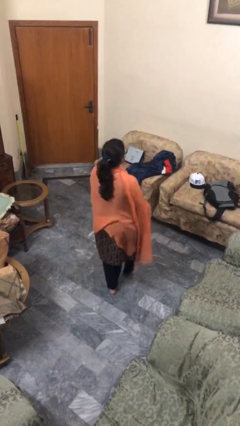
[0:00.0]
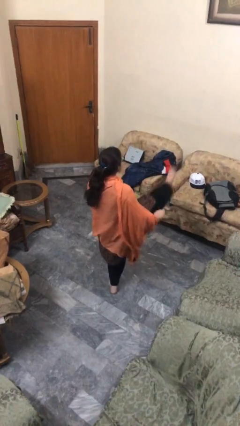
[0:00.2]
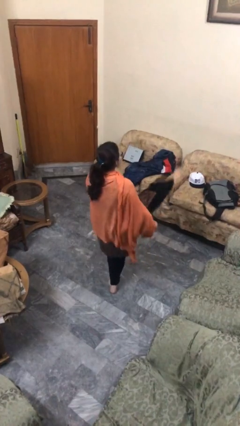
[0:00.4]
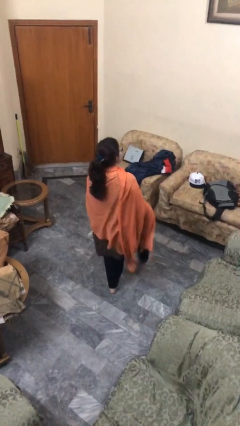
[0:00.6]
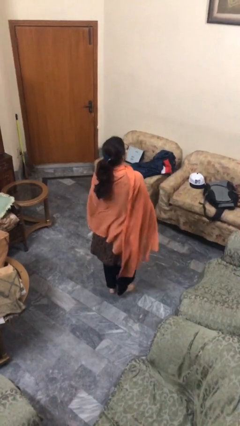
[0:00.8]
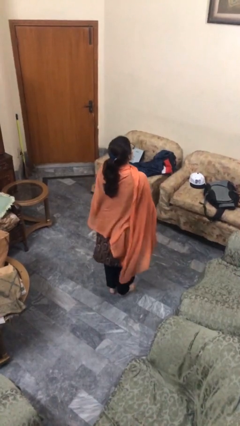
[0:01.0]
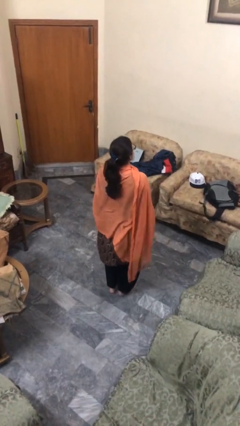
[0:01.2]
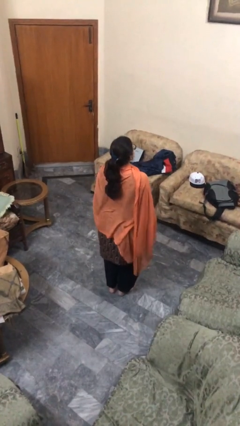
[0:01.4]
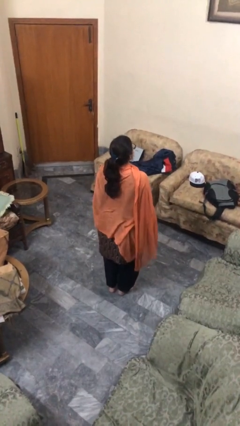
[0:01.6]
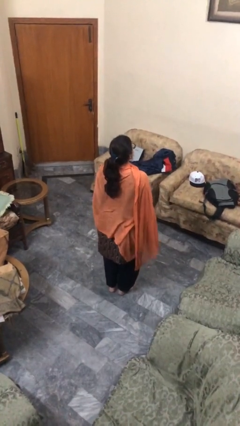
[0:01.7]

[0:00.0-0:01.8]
person karate kicks

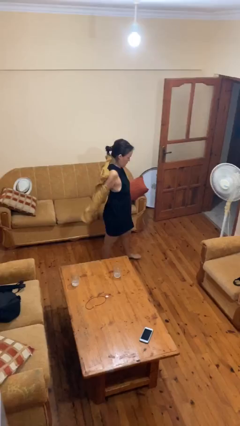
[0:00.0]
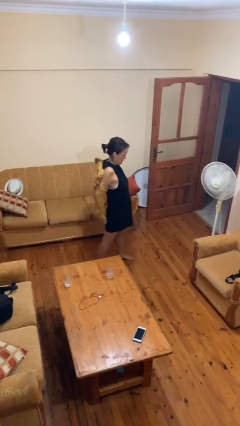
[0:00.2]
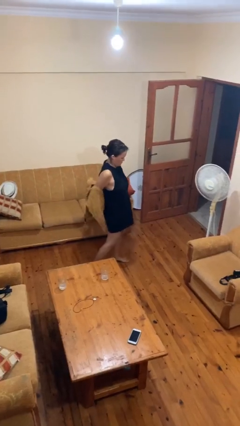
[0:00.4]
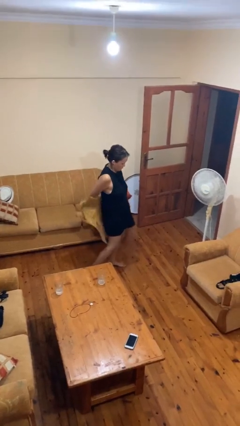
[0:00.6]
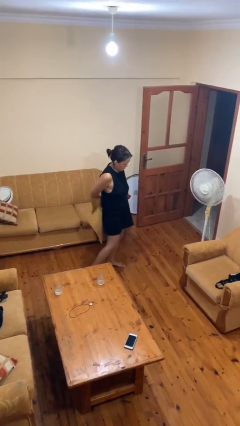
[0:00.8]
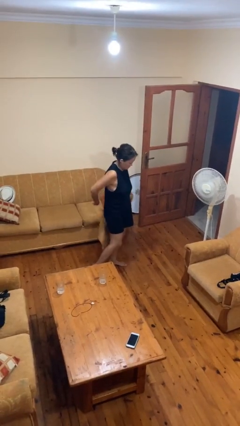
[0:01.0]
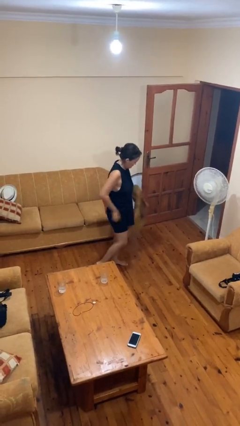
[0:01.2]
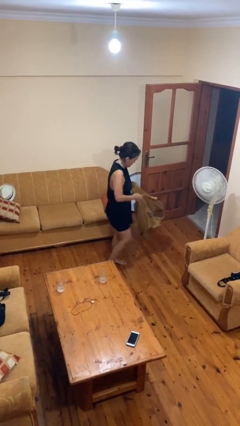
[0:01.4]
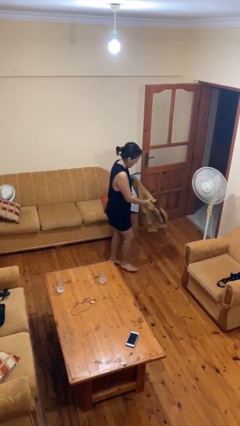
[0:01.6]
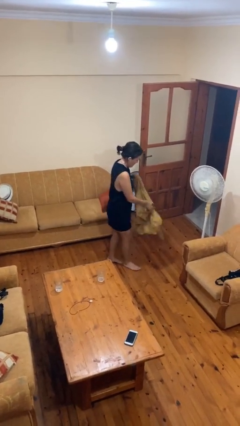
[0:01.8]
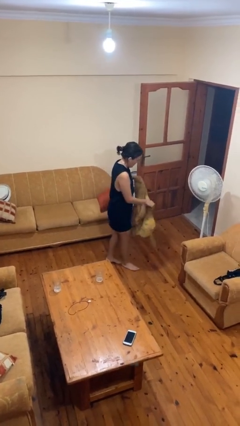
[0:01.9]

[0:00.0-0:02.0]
person takes off jacket

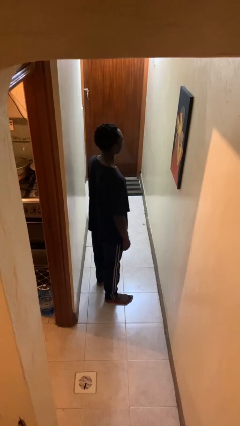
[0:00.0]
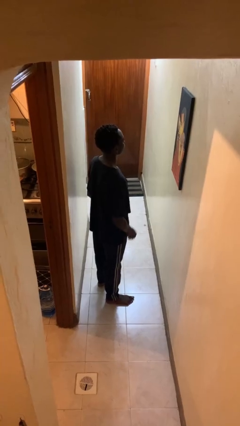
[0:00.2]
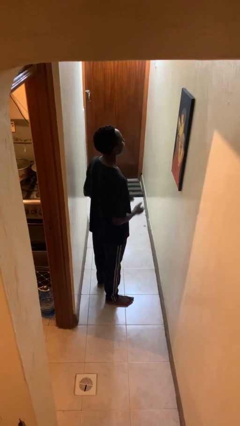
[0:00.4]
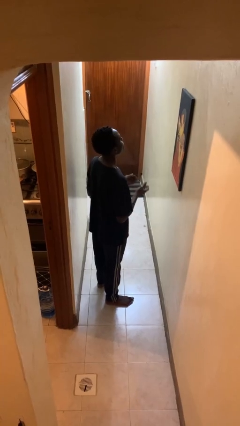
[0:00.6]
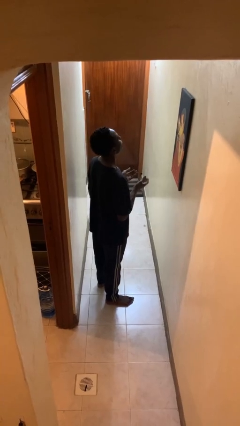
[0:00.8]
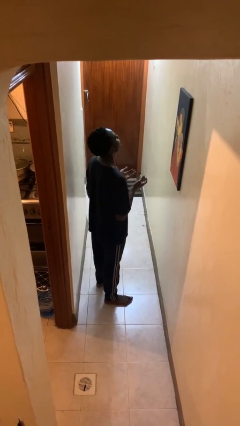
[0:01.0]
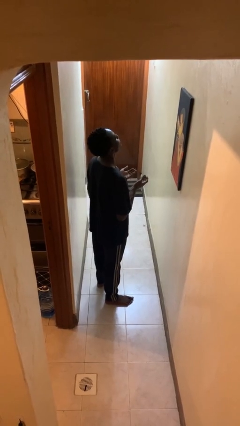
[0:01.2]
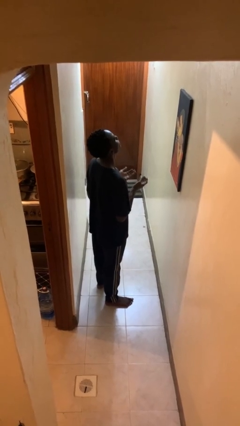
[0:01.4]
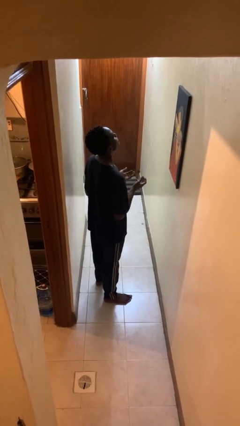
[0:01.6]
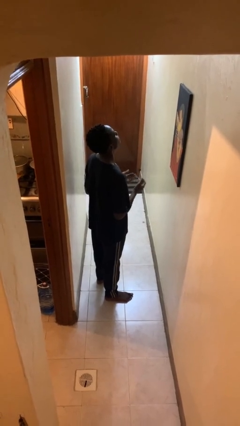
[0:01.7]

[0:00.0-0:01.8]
person prays

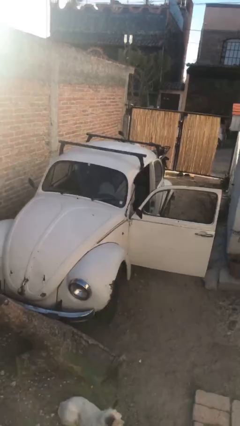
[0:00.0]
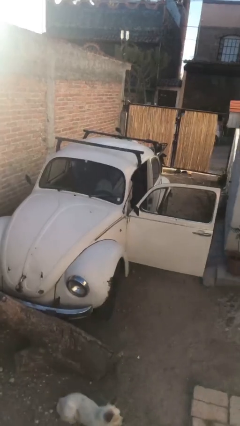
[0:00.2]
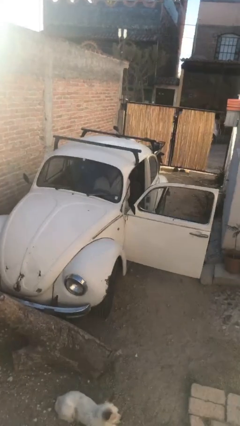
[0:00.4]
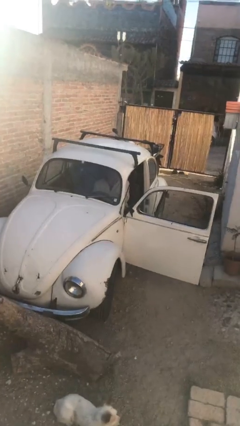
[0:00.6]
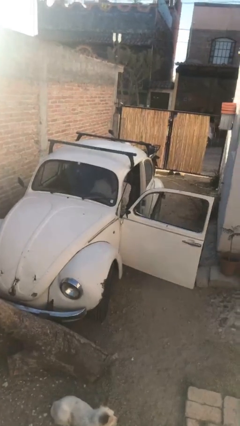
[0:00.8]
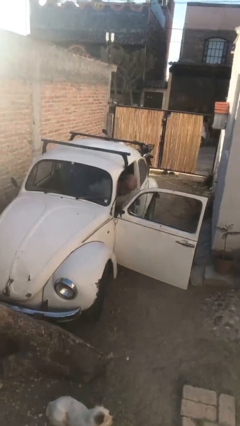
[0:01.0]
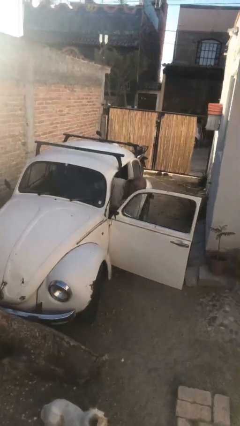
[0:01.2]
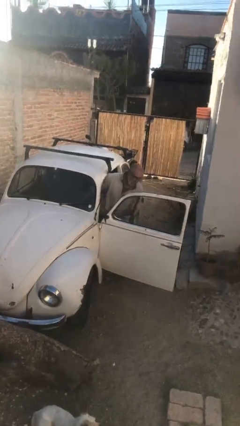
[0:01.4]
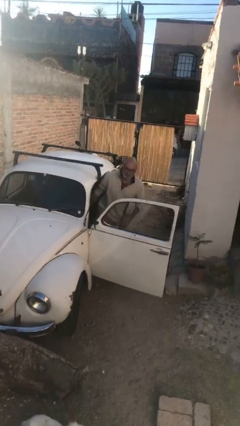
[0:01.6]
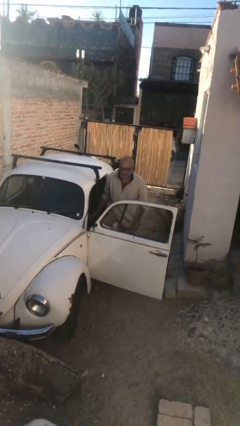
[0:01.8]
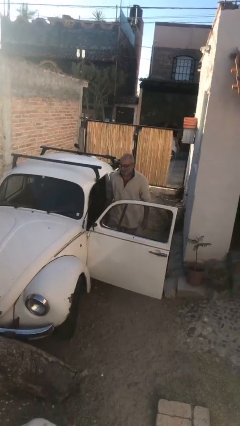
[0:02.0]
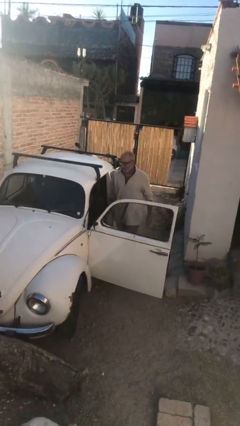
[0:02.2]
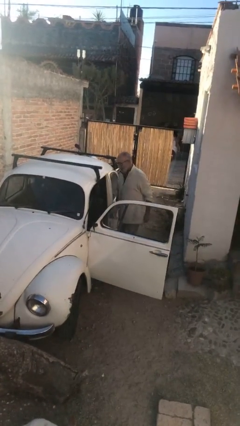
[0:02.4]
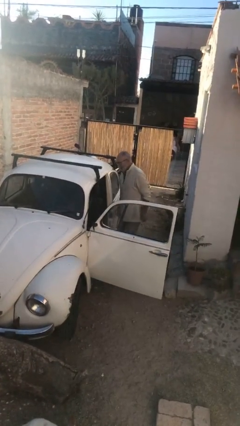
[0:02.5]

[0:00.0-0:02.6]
person exits car

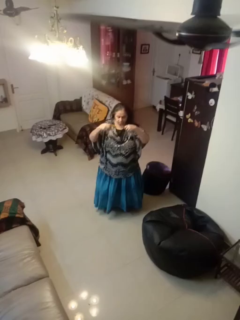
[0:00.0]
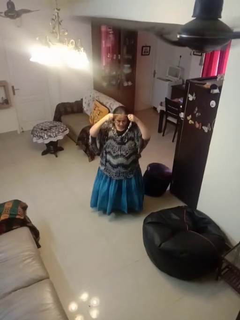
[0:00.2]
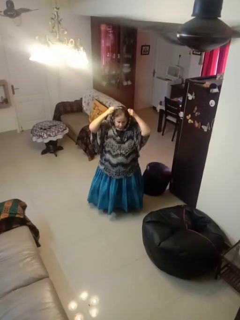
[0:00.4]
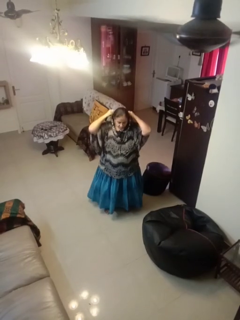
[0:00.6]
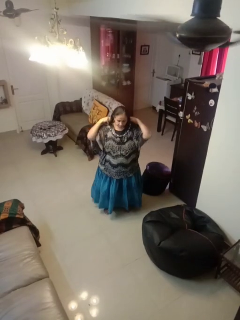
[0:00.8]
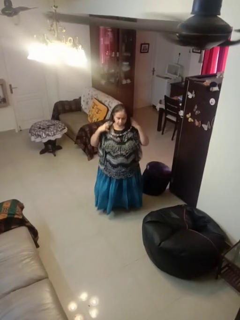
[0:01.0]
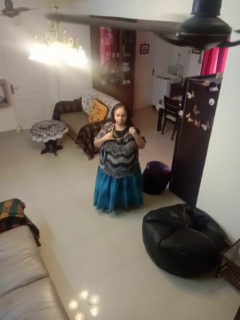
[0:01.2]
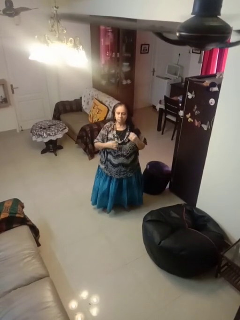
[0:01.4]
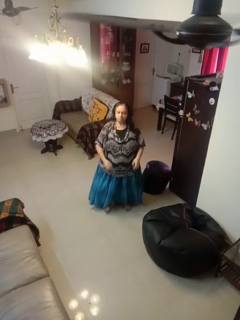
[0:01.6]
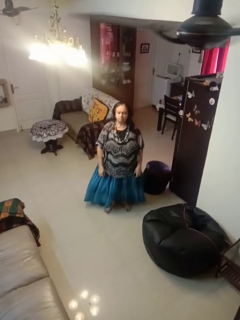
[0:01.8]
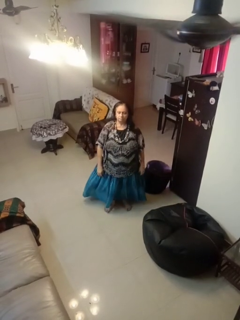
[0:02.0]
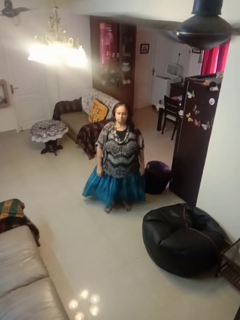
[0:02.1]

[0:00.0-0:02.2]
person puts on necklace

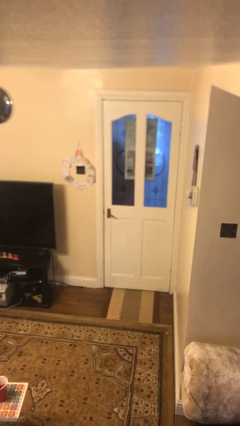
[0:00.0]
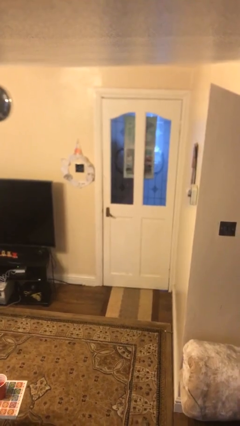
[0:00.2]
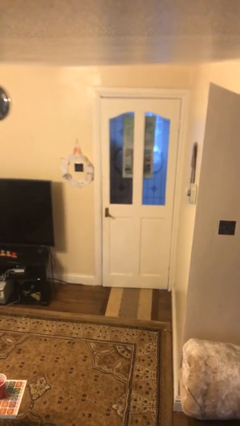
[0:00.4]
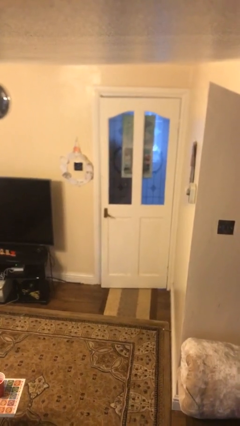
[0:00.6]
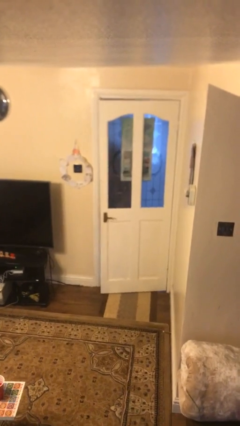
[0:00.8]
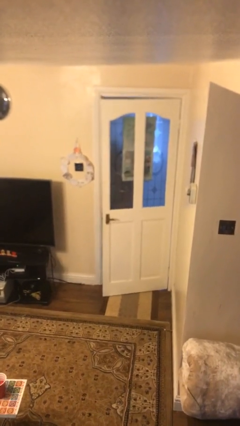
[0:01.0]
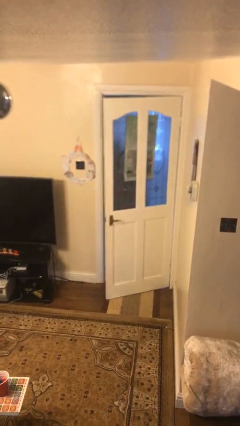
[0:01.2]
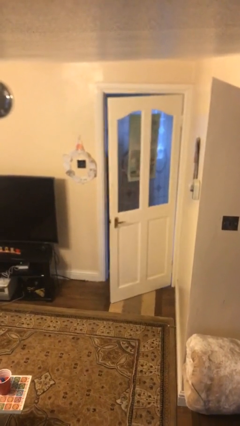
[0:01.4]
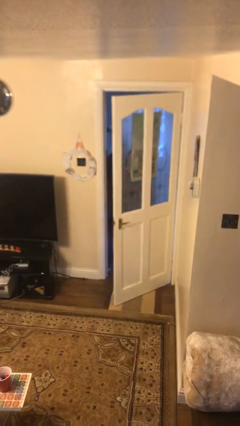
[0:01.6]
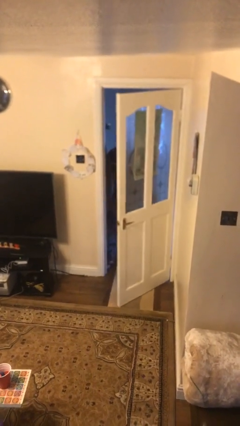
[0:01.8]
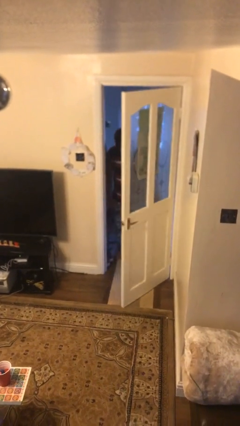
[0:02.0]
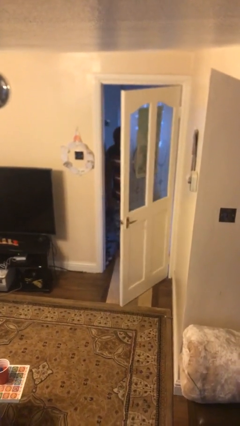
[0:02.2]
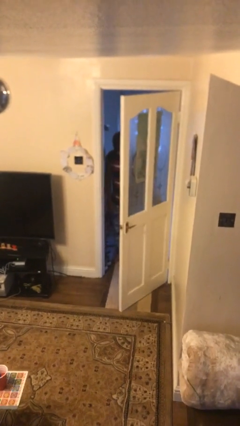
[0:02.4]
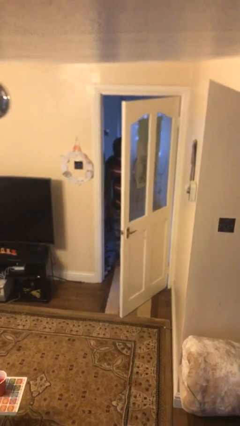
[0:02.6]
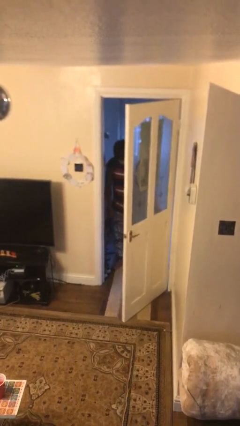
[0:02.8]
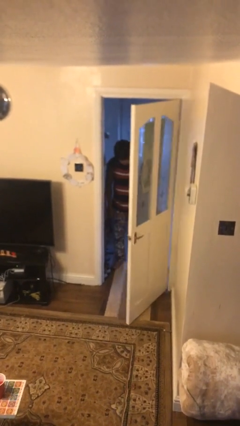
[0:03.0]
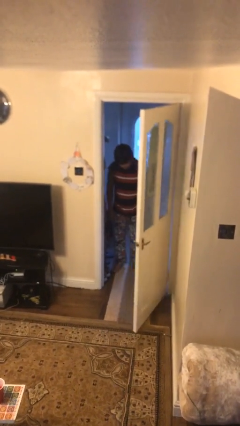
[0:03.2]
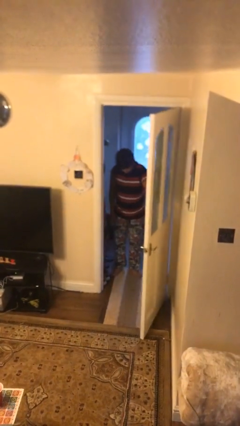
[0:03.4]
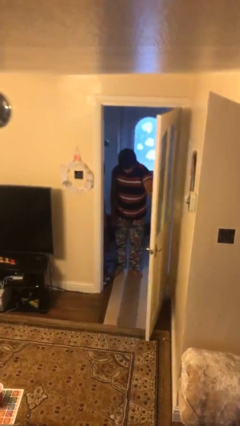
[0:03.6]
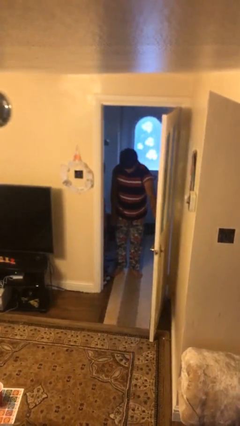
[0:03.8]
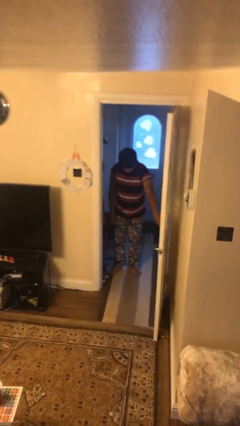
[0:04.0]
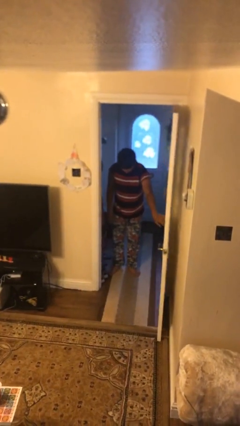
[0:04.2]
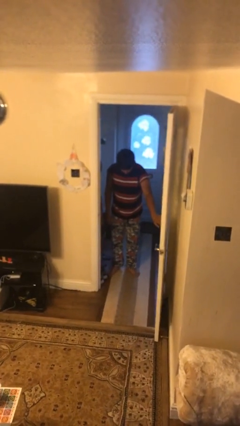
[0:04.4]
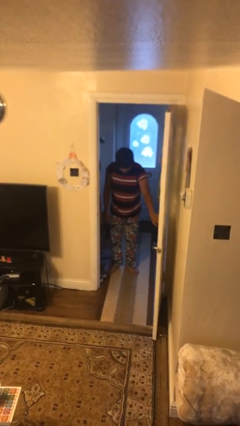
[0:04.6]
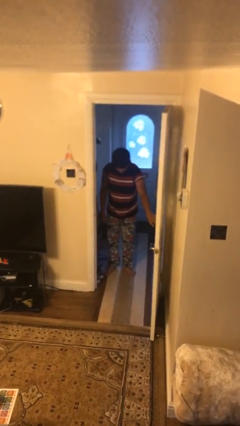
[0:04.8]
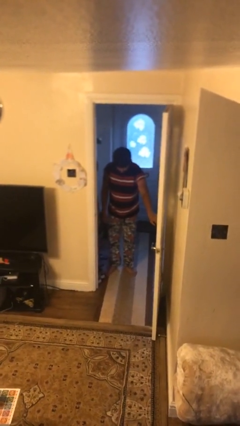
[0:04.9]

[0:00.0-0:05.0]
person opens facility door

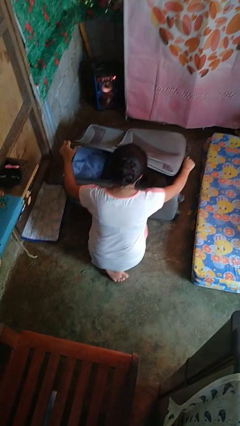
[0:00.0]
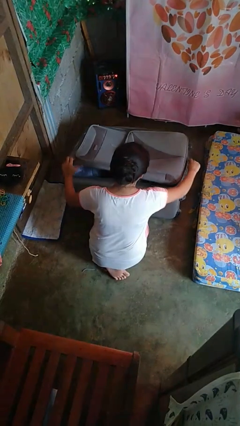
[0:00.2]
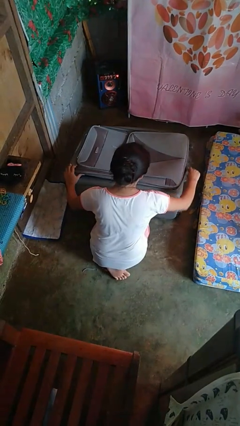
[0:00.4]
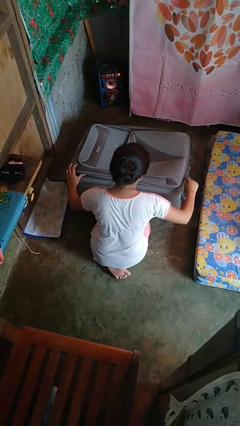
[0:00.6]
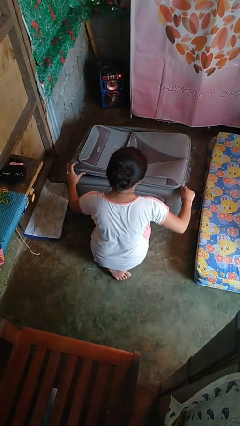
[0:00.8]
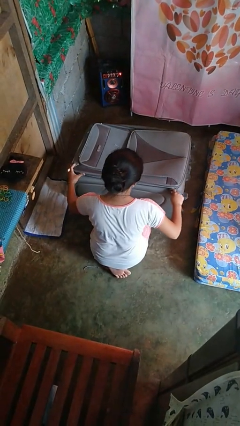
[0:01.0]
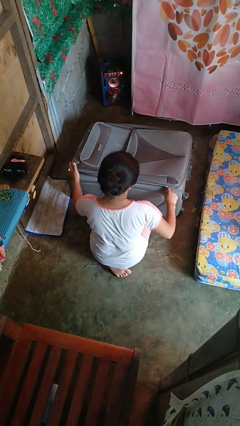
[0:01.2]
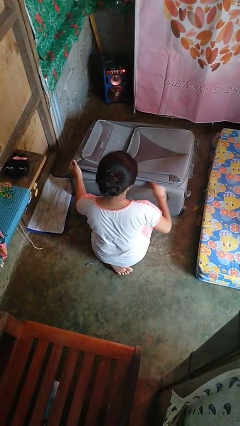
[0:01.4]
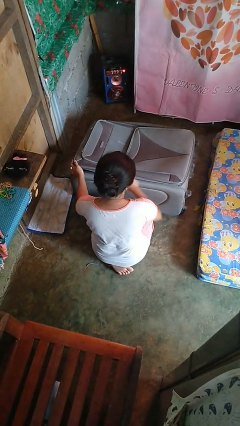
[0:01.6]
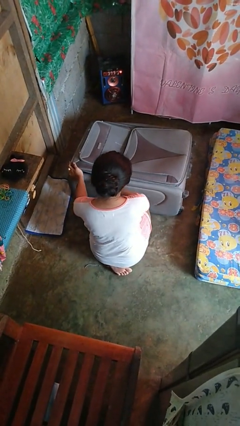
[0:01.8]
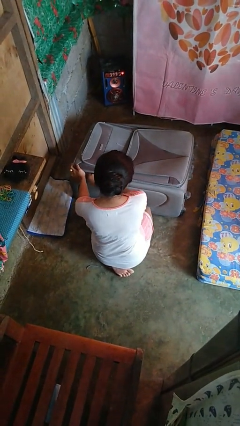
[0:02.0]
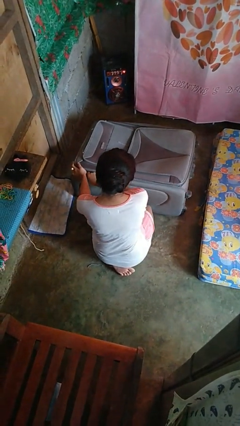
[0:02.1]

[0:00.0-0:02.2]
person closes suitcase
